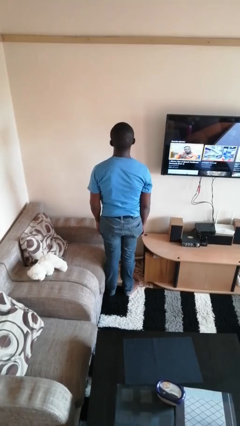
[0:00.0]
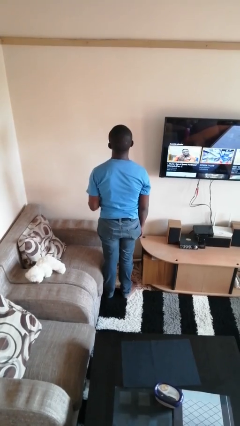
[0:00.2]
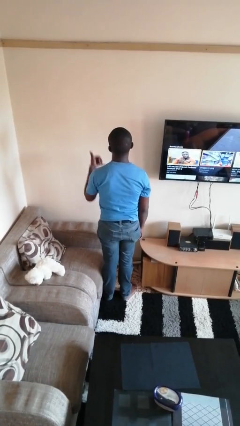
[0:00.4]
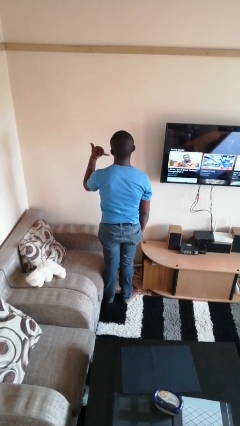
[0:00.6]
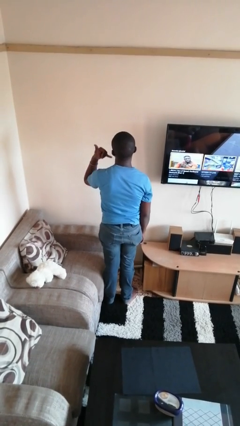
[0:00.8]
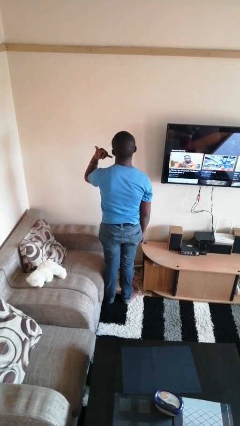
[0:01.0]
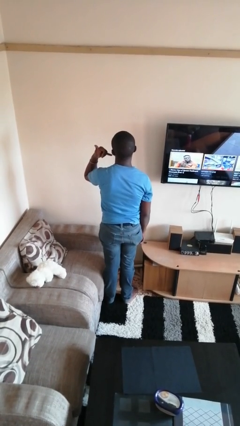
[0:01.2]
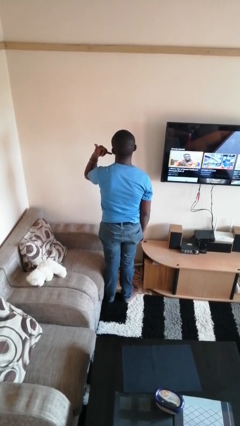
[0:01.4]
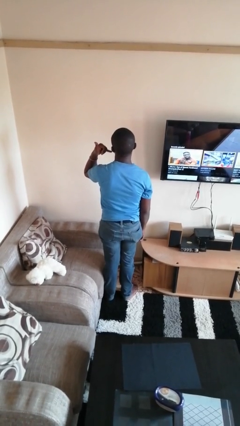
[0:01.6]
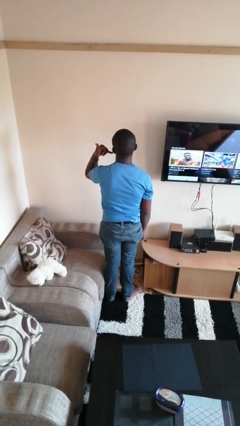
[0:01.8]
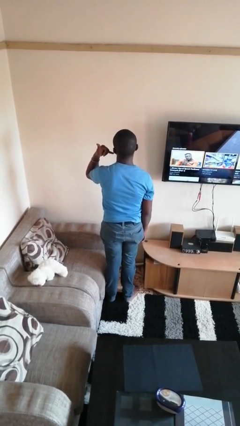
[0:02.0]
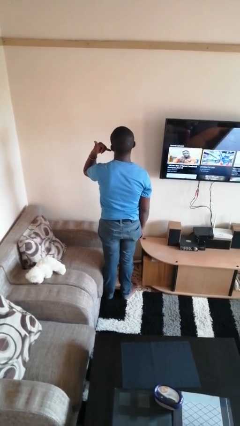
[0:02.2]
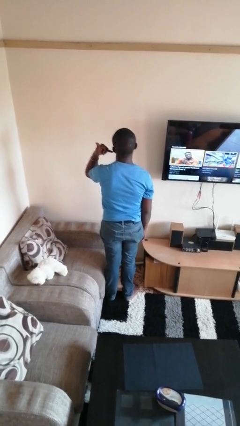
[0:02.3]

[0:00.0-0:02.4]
person gestures call me

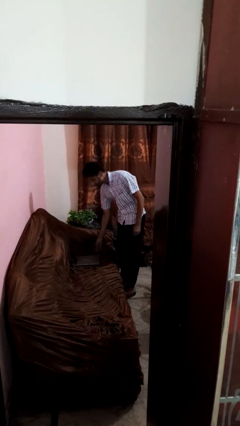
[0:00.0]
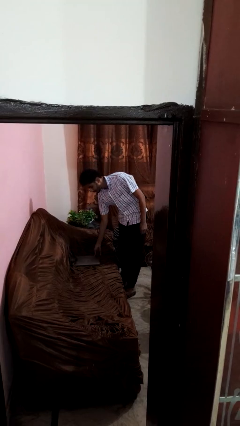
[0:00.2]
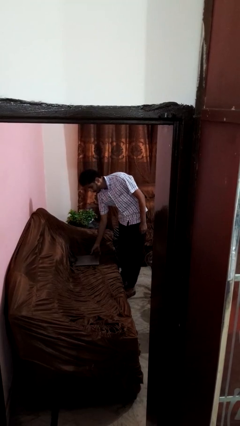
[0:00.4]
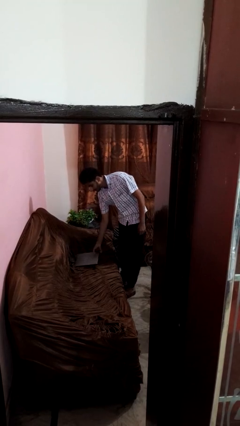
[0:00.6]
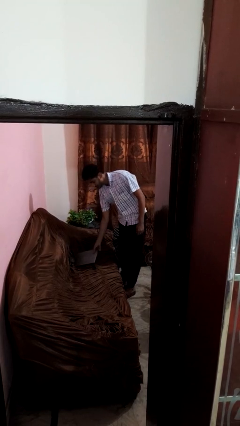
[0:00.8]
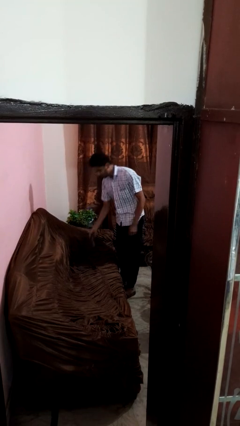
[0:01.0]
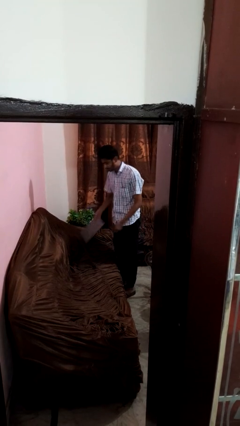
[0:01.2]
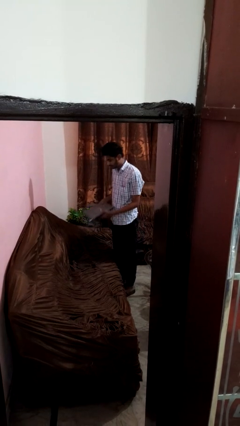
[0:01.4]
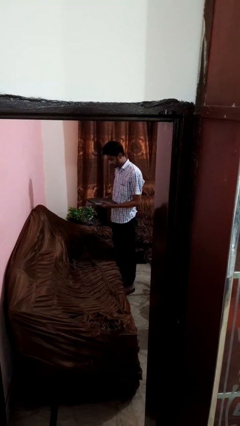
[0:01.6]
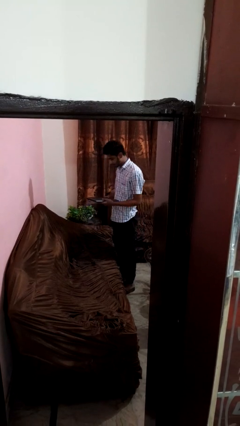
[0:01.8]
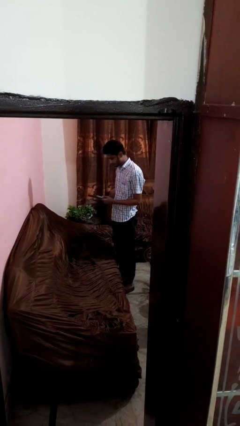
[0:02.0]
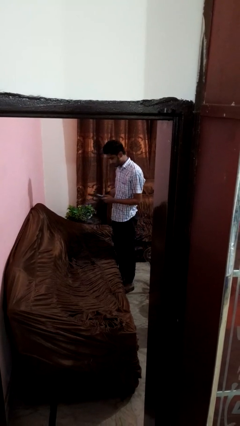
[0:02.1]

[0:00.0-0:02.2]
person picks up object from couch

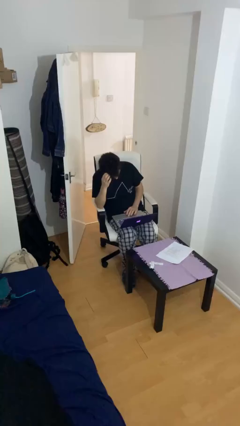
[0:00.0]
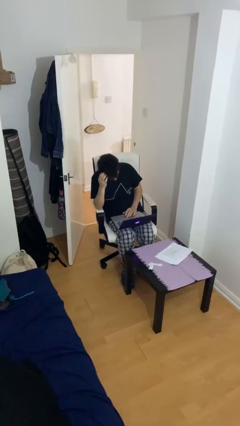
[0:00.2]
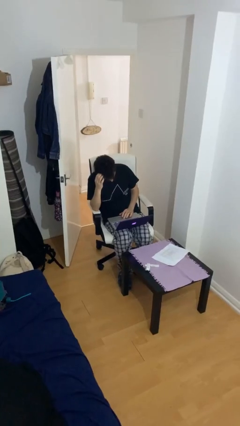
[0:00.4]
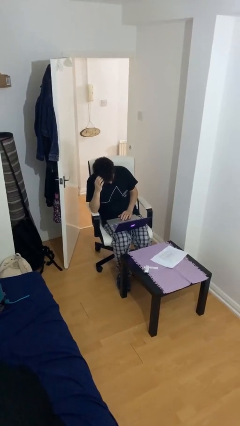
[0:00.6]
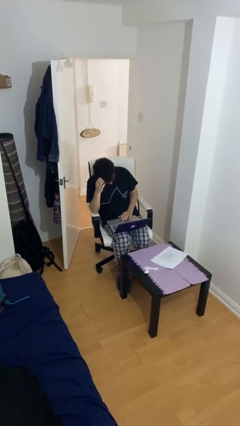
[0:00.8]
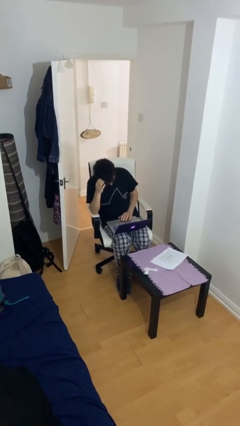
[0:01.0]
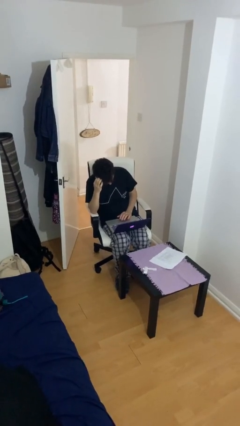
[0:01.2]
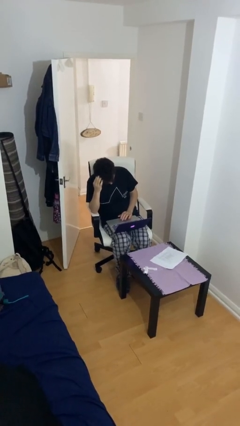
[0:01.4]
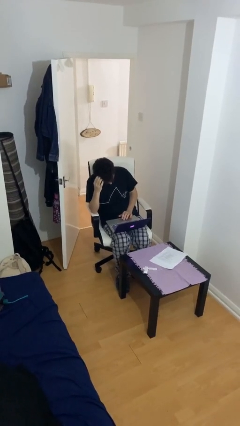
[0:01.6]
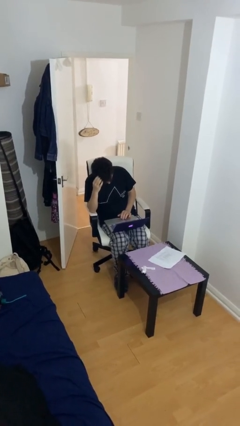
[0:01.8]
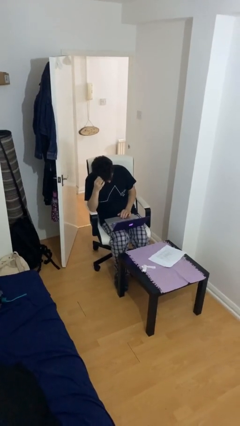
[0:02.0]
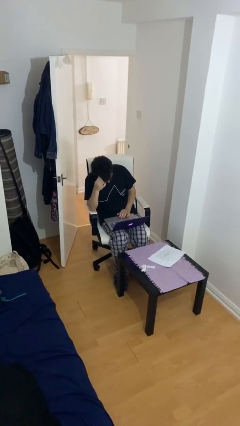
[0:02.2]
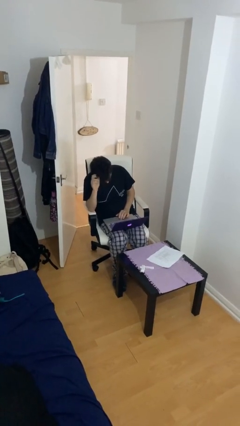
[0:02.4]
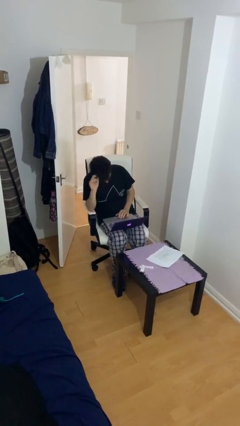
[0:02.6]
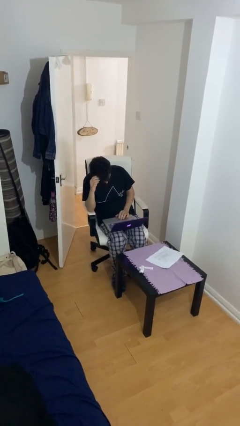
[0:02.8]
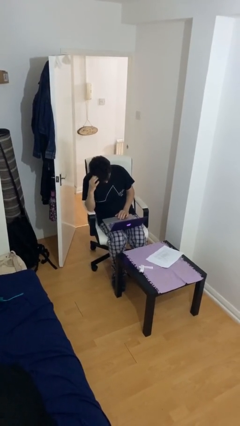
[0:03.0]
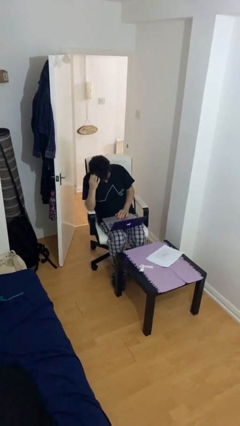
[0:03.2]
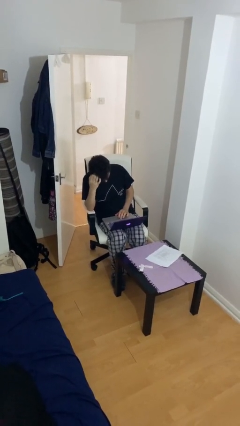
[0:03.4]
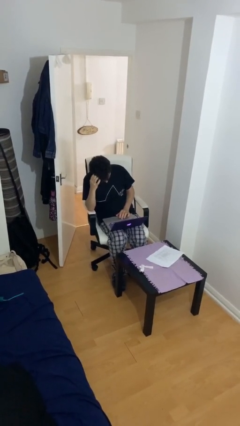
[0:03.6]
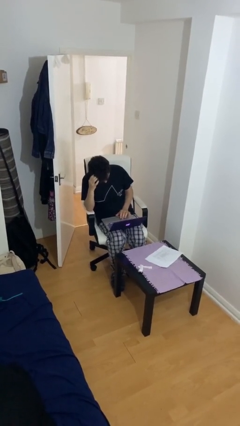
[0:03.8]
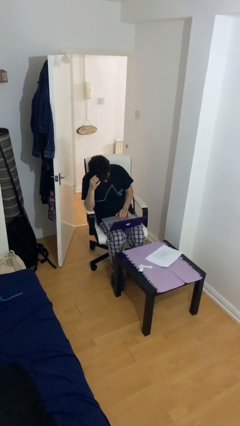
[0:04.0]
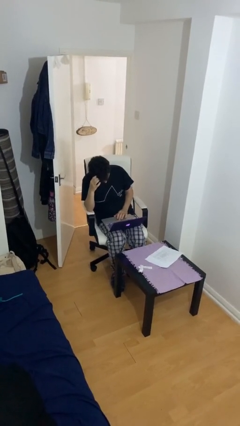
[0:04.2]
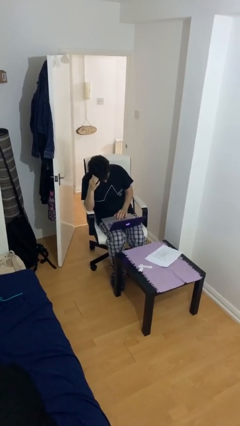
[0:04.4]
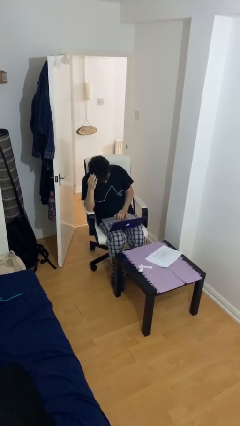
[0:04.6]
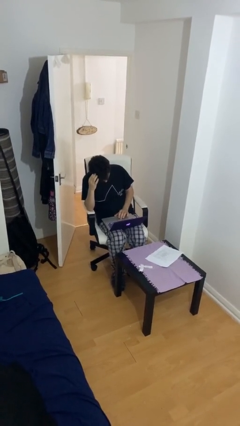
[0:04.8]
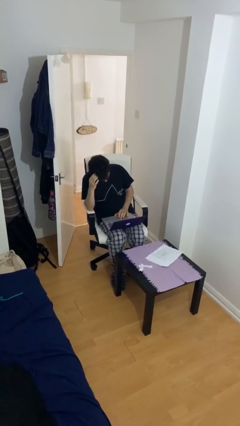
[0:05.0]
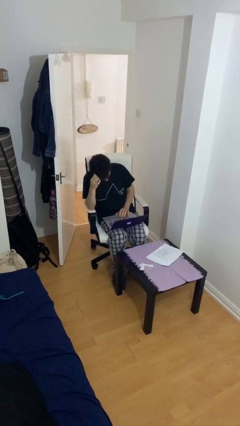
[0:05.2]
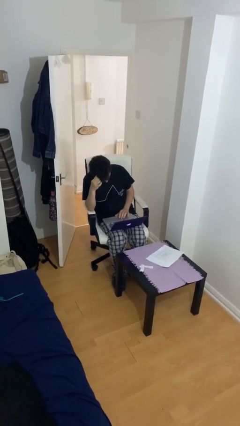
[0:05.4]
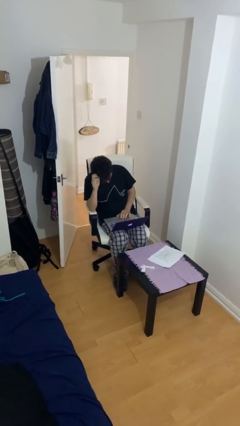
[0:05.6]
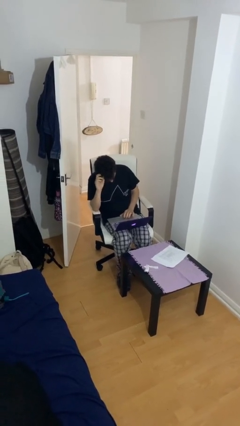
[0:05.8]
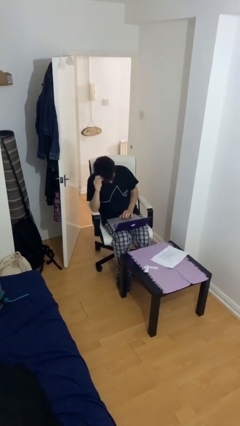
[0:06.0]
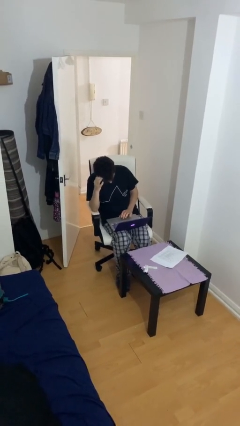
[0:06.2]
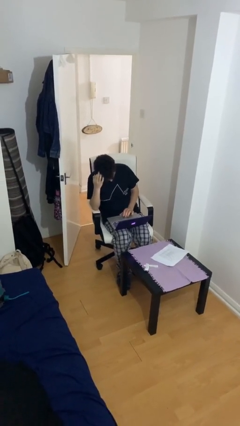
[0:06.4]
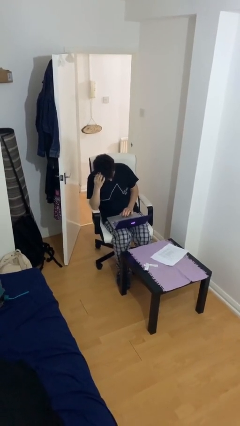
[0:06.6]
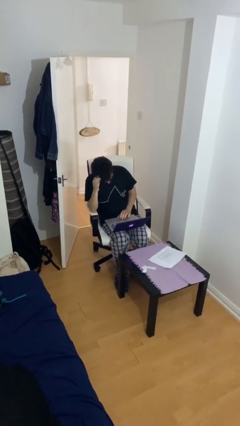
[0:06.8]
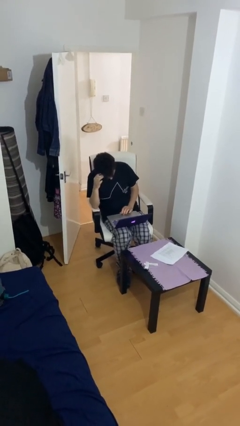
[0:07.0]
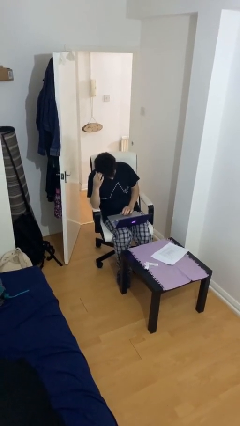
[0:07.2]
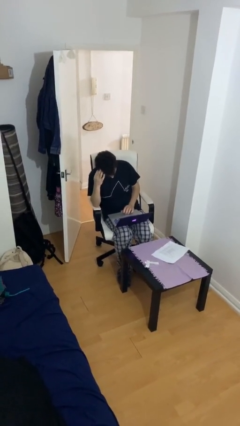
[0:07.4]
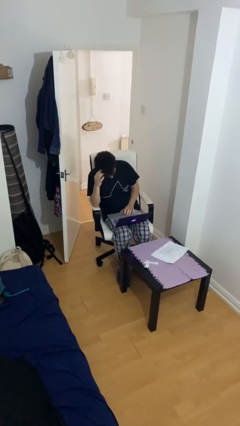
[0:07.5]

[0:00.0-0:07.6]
person interacts with laptop

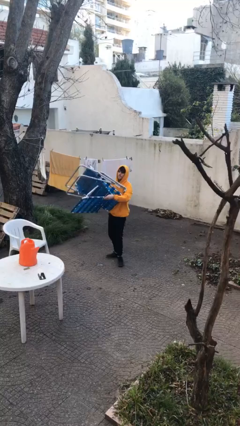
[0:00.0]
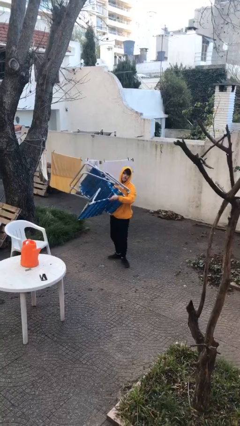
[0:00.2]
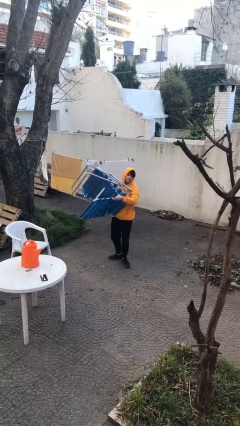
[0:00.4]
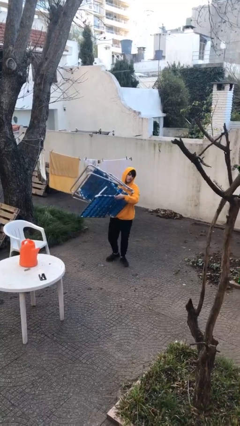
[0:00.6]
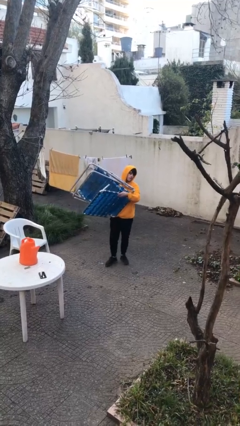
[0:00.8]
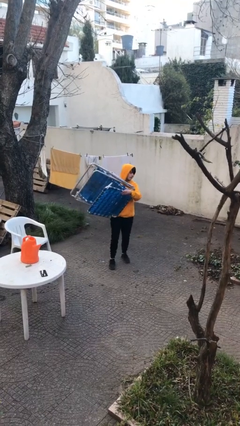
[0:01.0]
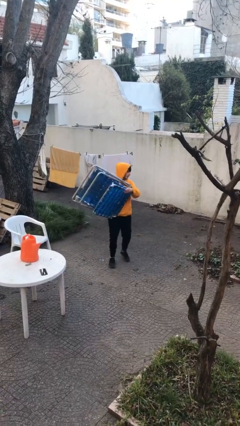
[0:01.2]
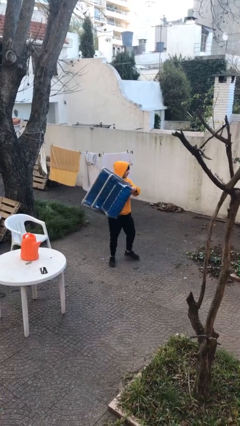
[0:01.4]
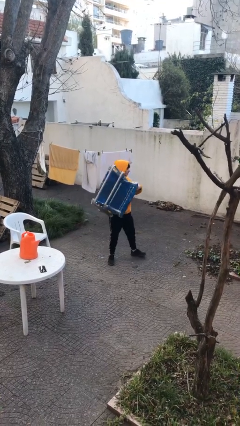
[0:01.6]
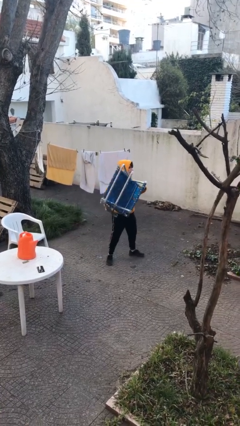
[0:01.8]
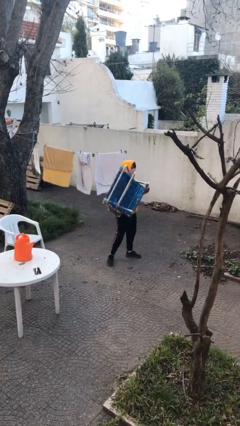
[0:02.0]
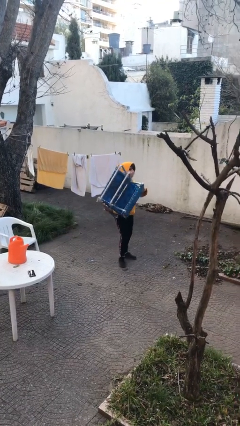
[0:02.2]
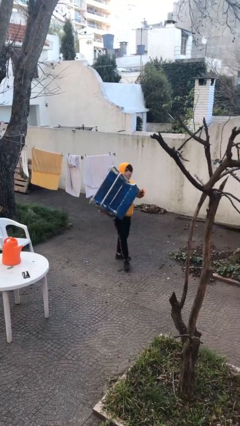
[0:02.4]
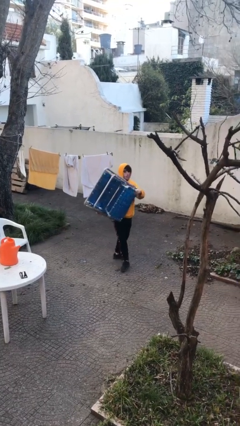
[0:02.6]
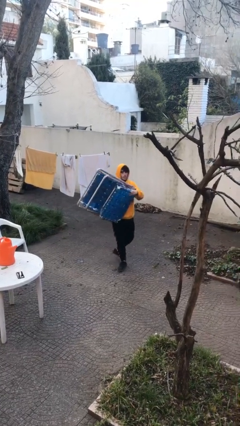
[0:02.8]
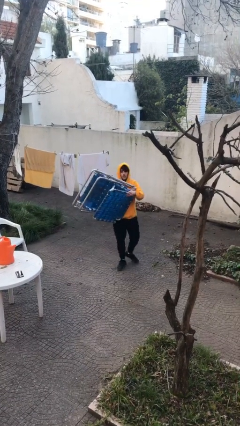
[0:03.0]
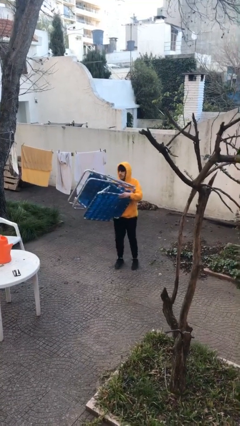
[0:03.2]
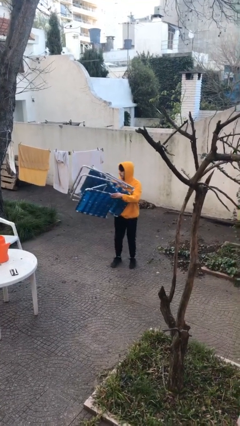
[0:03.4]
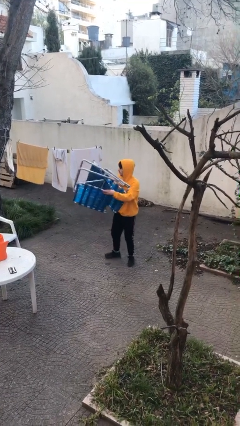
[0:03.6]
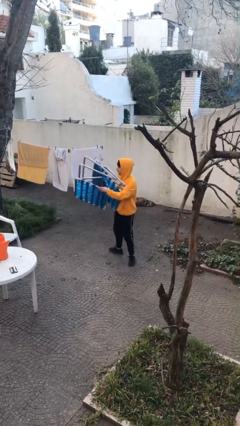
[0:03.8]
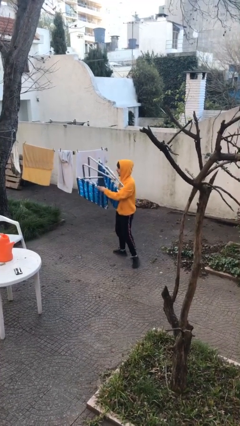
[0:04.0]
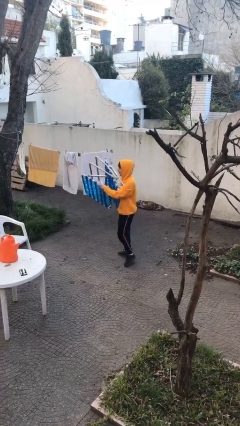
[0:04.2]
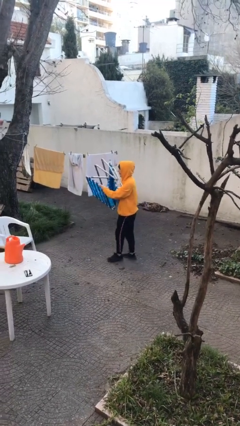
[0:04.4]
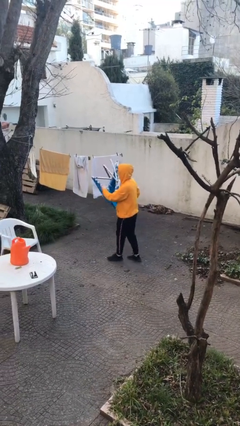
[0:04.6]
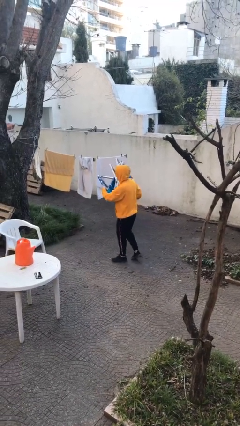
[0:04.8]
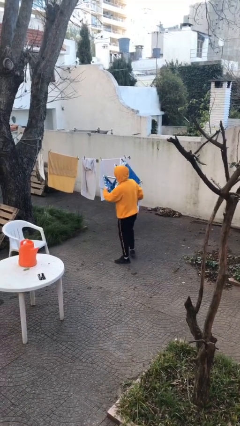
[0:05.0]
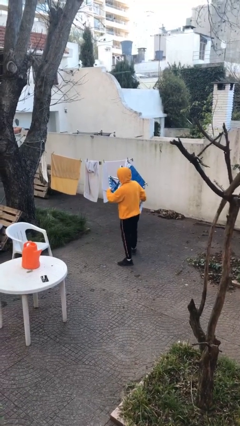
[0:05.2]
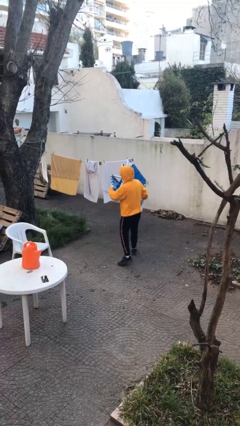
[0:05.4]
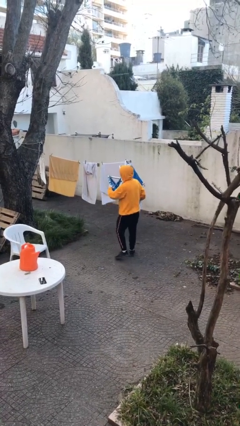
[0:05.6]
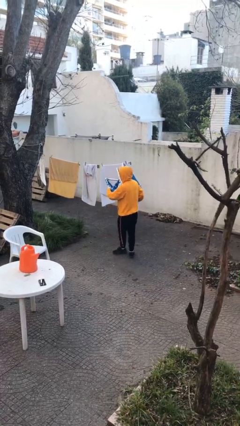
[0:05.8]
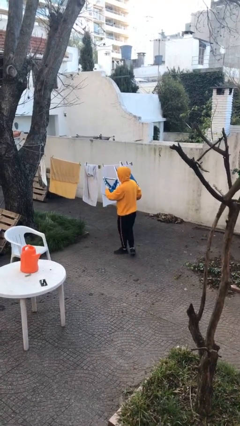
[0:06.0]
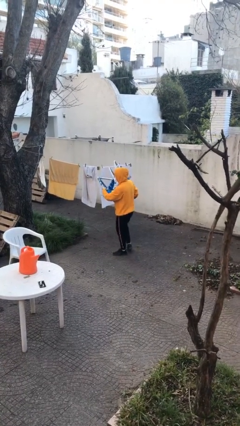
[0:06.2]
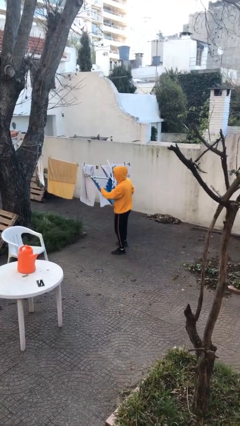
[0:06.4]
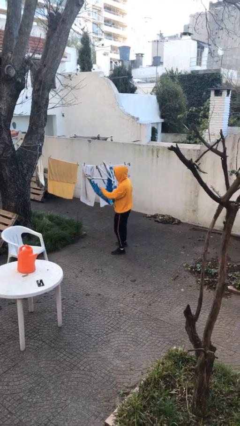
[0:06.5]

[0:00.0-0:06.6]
person carries heavy object
